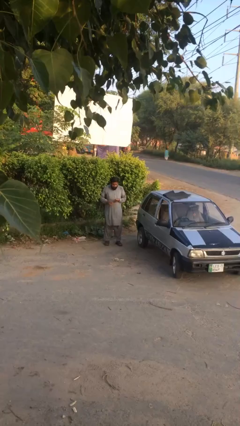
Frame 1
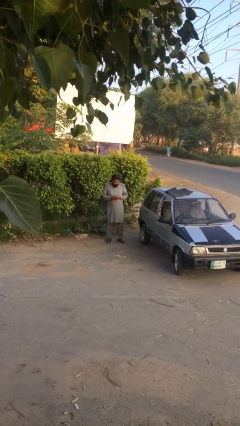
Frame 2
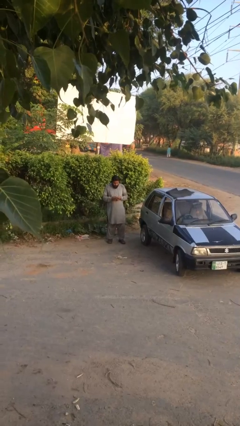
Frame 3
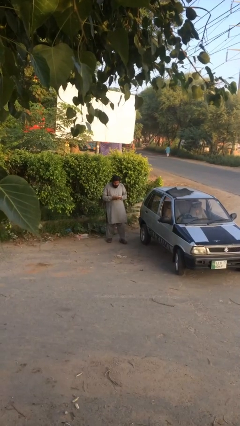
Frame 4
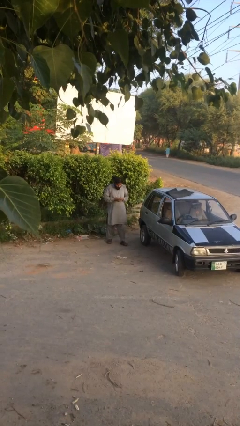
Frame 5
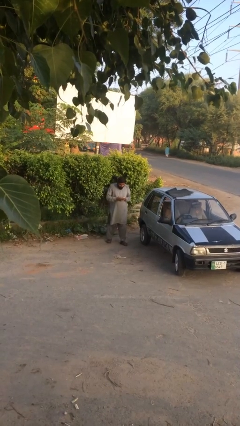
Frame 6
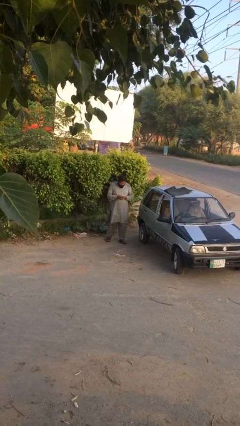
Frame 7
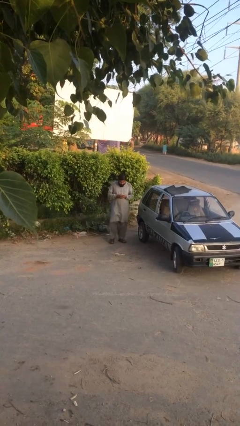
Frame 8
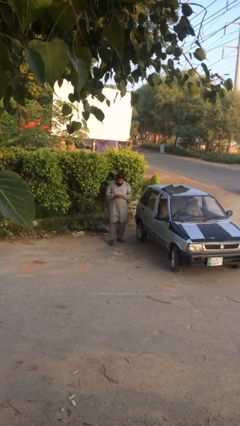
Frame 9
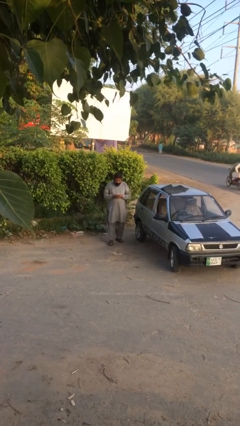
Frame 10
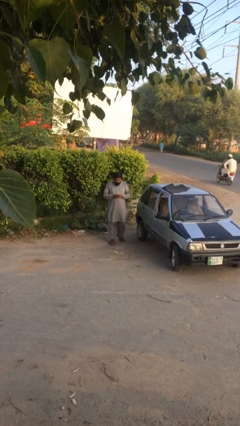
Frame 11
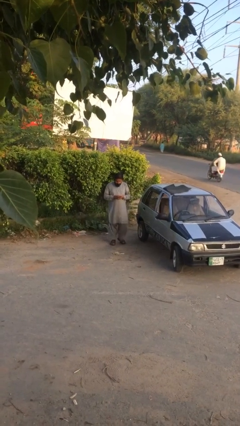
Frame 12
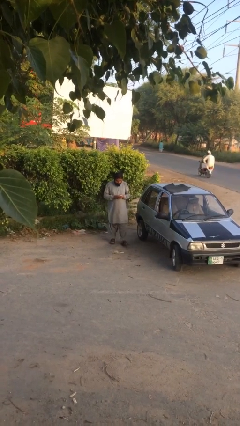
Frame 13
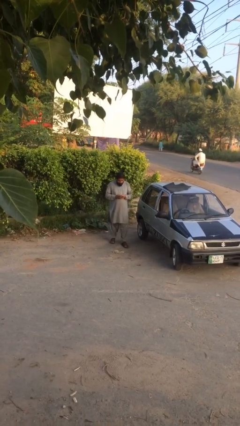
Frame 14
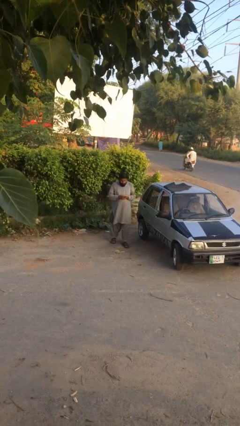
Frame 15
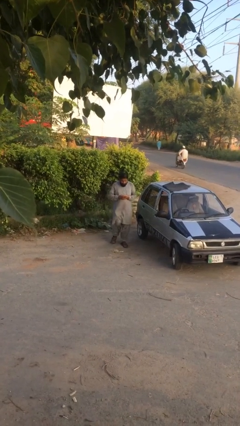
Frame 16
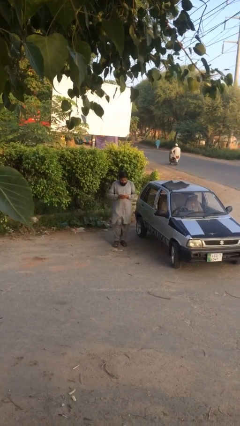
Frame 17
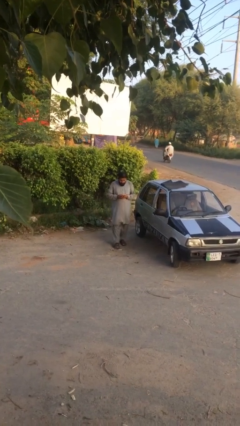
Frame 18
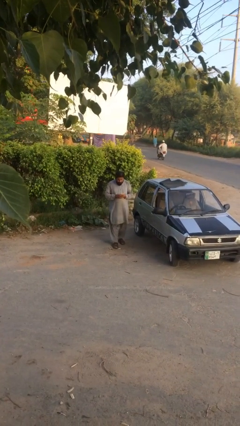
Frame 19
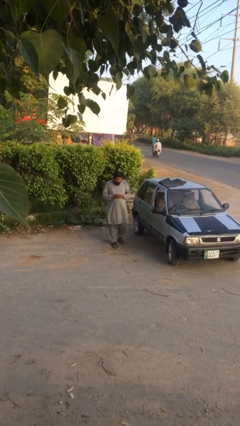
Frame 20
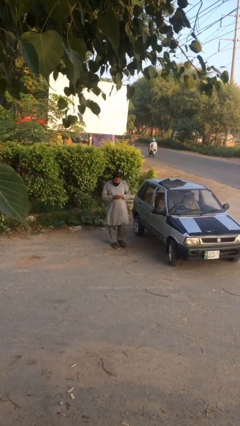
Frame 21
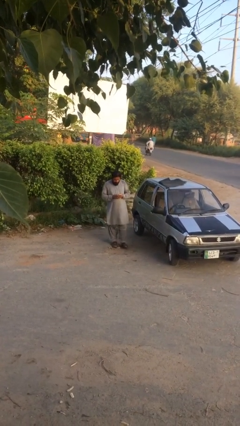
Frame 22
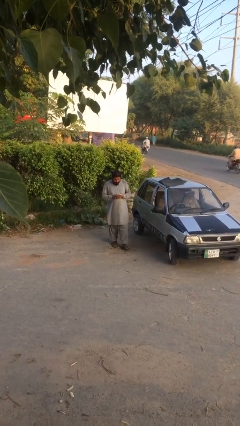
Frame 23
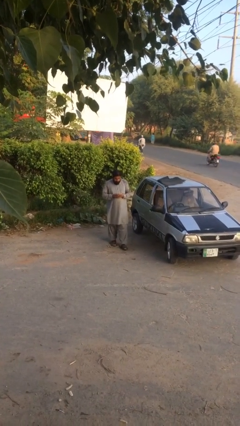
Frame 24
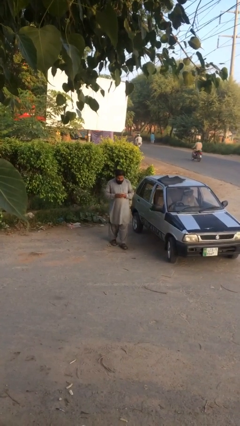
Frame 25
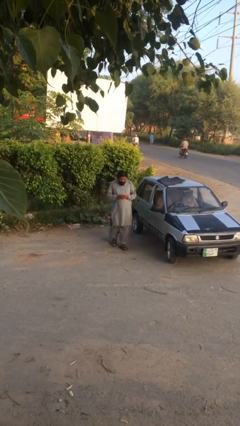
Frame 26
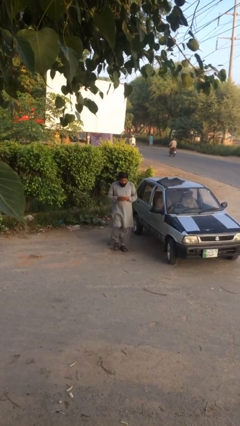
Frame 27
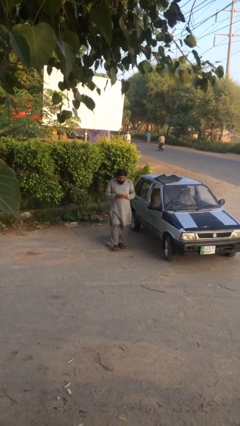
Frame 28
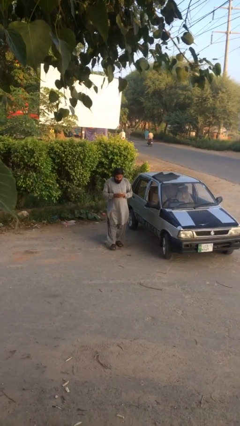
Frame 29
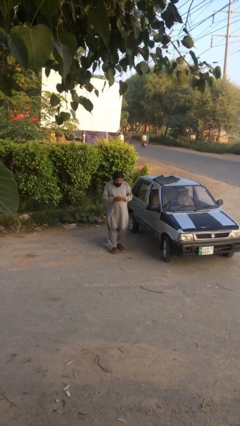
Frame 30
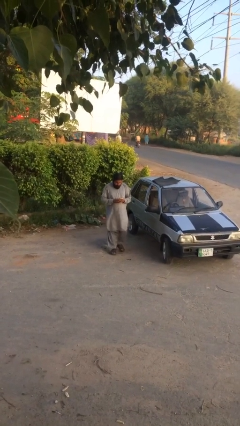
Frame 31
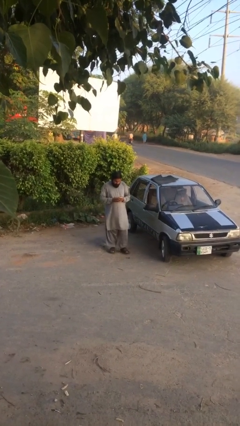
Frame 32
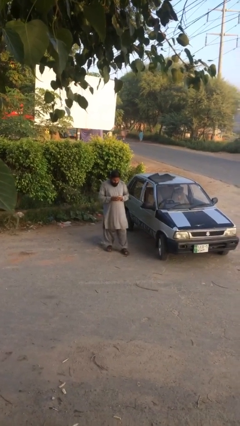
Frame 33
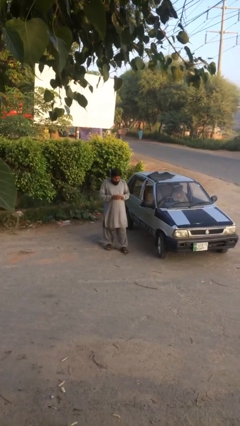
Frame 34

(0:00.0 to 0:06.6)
person texts on phone

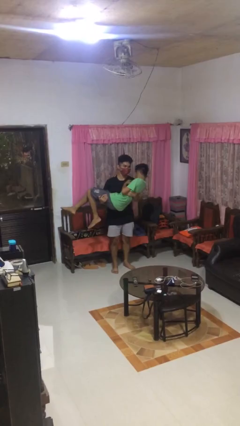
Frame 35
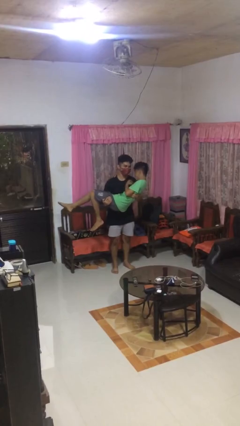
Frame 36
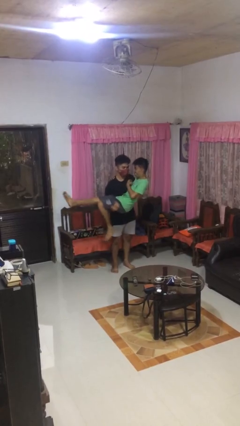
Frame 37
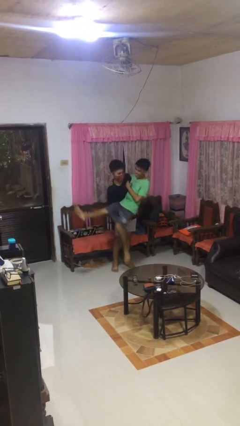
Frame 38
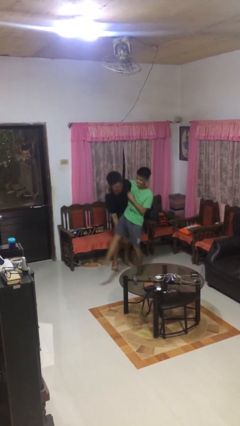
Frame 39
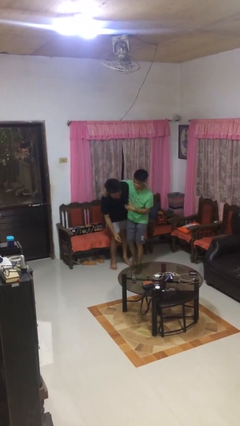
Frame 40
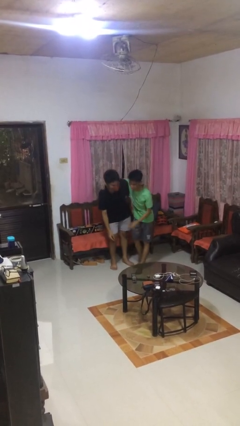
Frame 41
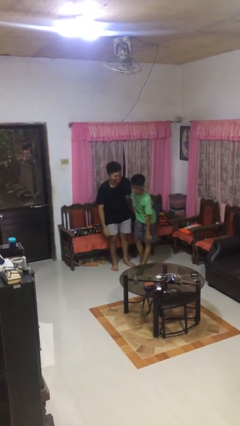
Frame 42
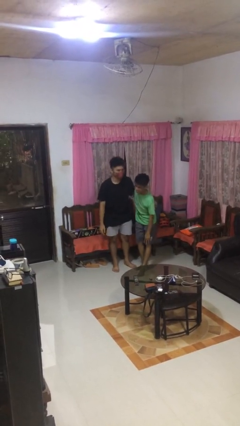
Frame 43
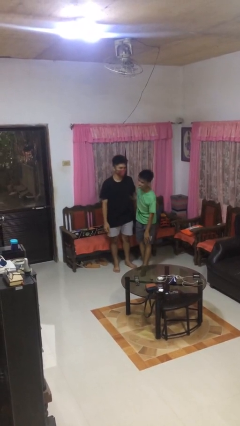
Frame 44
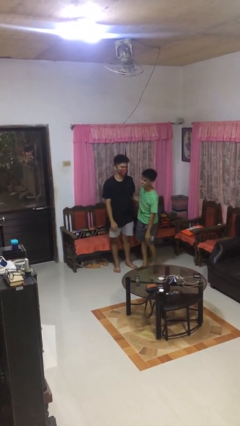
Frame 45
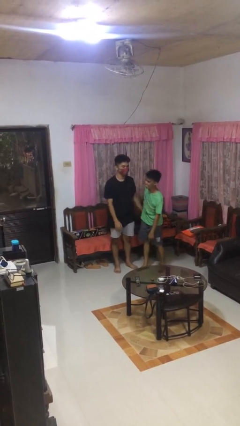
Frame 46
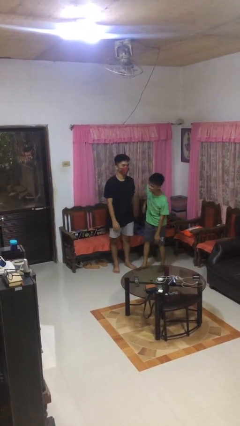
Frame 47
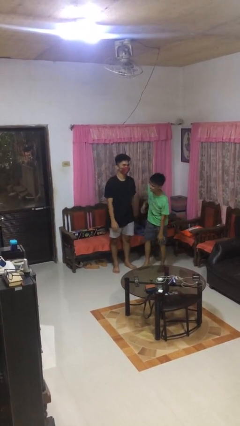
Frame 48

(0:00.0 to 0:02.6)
person puts down person

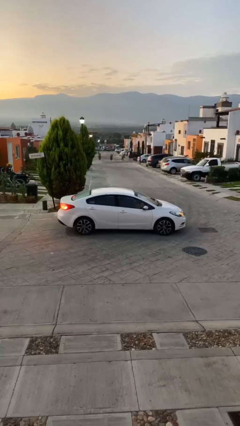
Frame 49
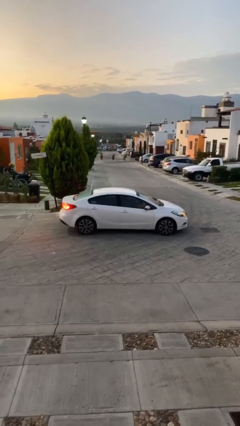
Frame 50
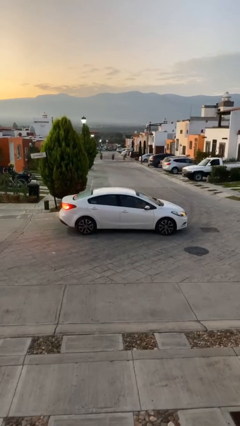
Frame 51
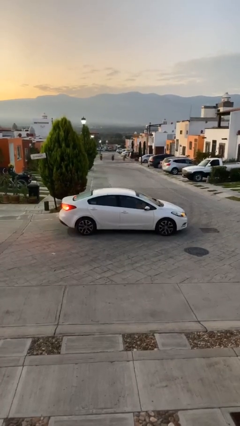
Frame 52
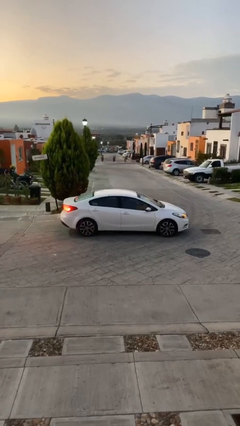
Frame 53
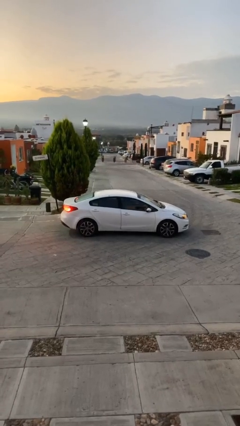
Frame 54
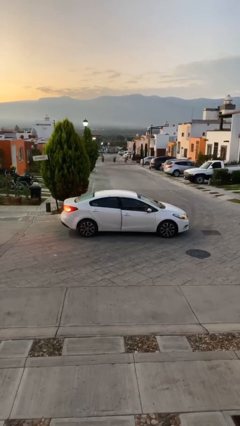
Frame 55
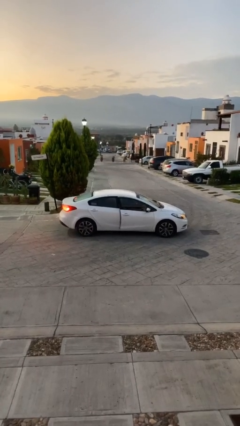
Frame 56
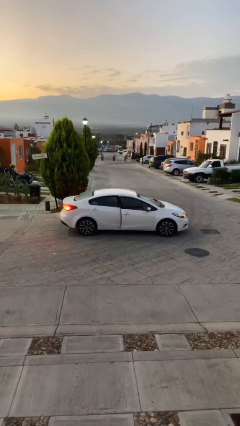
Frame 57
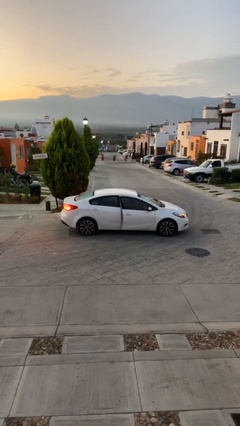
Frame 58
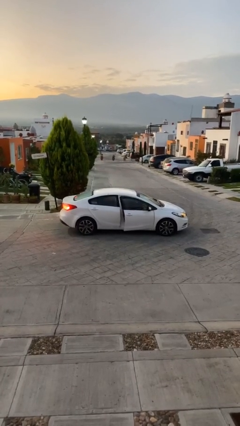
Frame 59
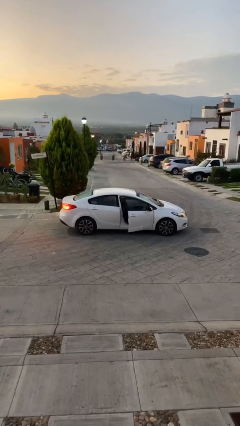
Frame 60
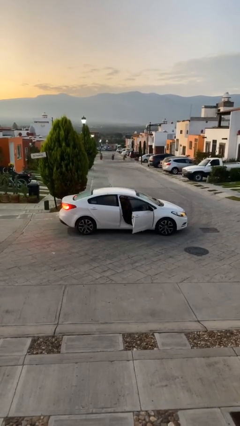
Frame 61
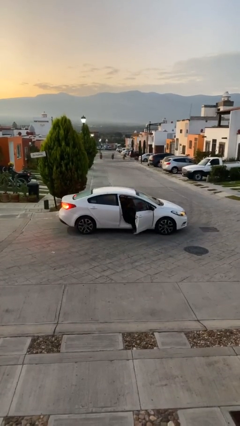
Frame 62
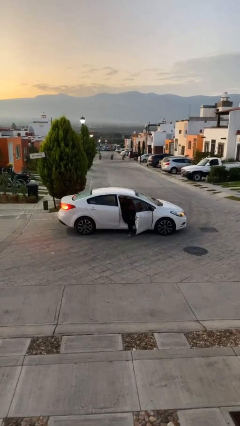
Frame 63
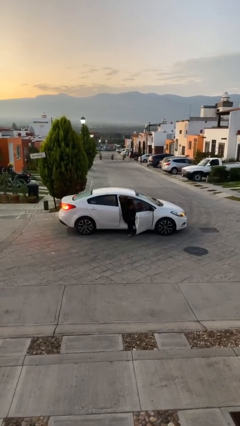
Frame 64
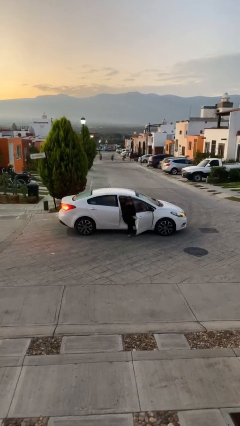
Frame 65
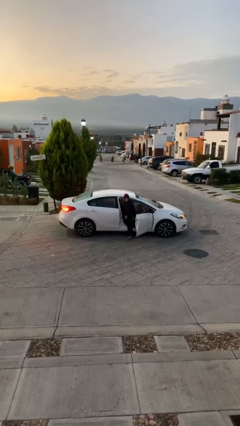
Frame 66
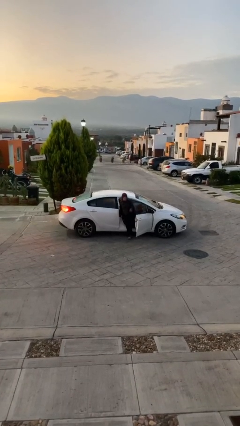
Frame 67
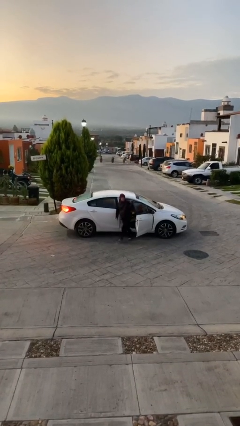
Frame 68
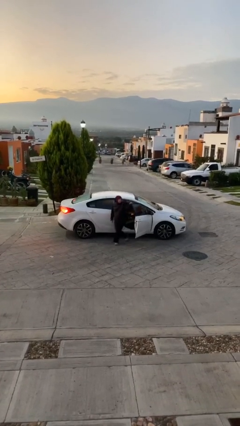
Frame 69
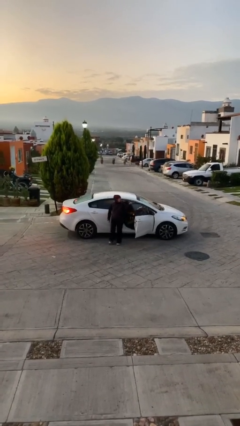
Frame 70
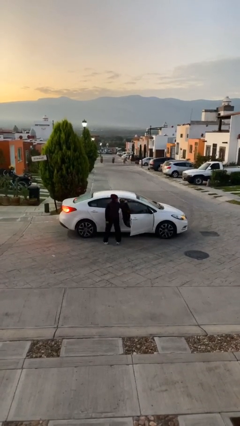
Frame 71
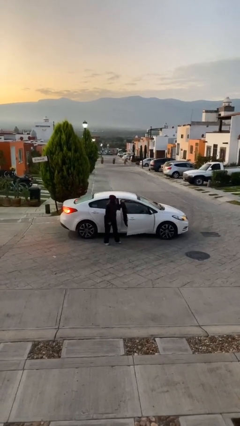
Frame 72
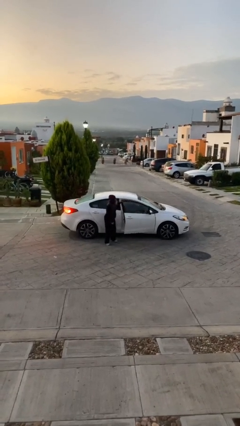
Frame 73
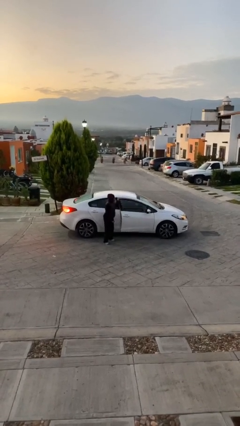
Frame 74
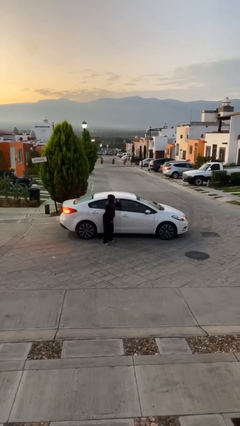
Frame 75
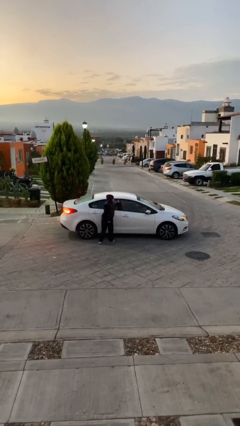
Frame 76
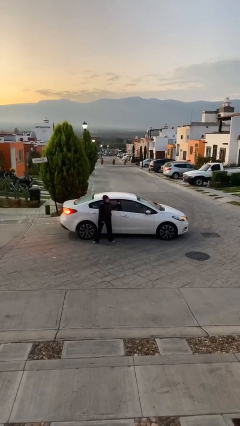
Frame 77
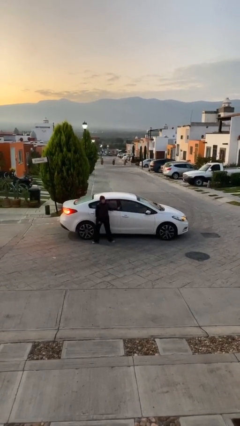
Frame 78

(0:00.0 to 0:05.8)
car drops off person

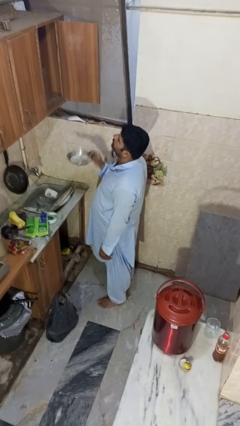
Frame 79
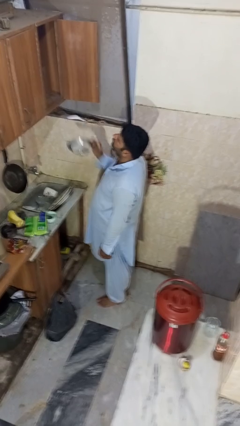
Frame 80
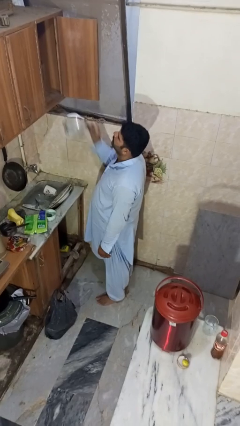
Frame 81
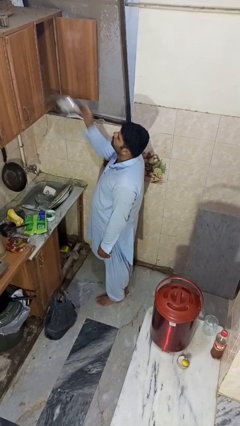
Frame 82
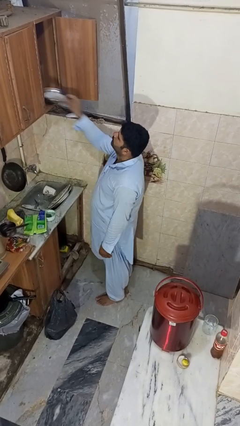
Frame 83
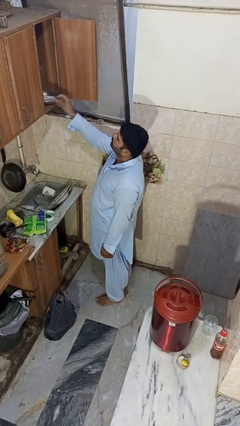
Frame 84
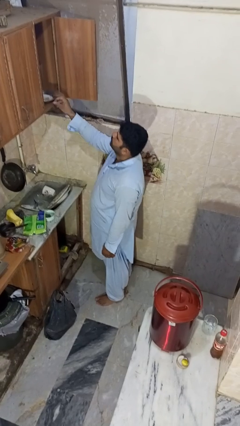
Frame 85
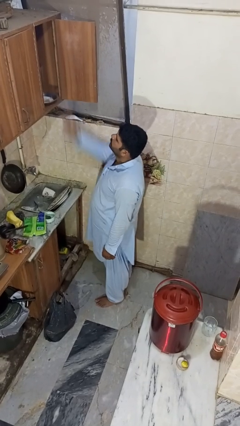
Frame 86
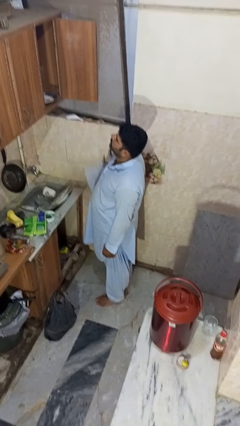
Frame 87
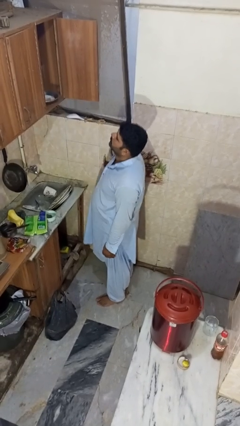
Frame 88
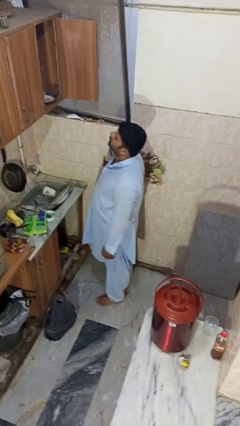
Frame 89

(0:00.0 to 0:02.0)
person puts object in cabinet

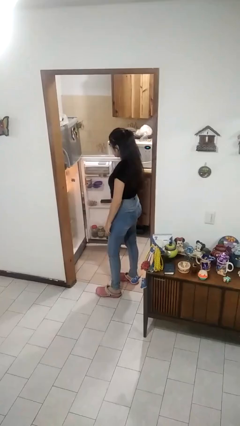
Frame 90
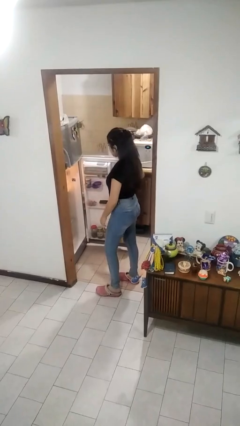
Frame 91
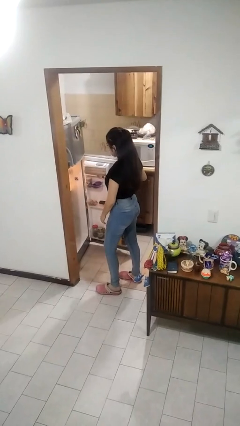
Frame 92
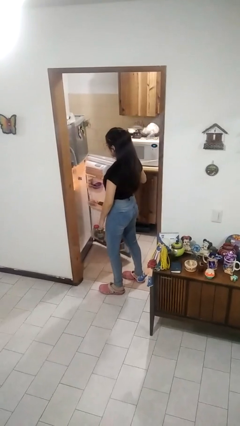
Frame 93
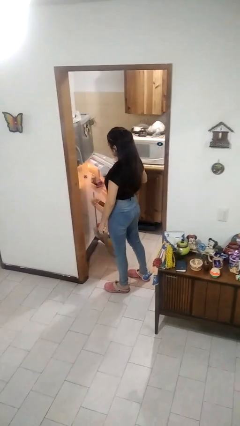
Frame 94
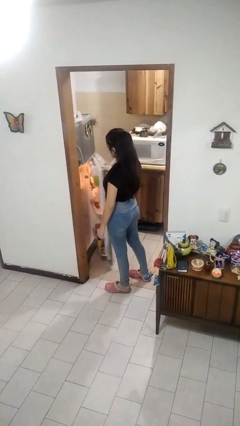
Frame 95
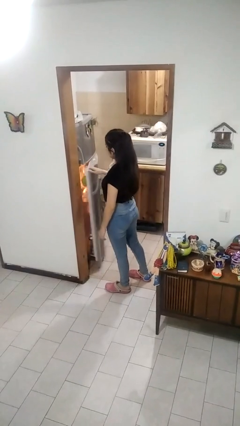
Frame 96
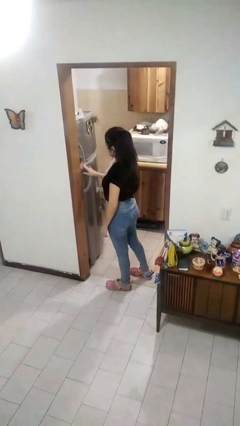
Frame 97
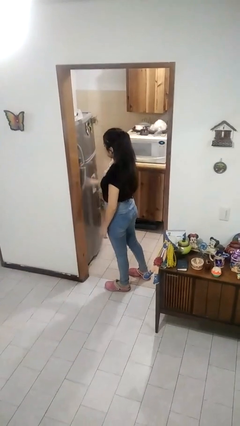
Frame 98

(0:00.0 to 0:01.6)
person closes refrigerator
